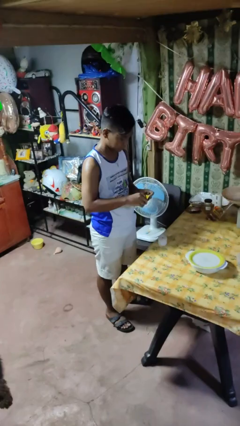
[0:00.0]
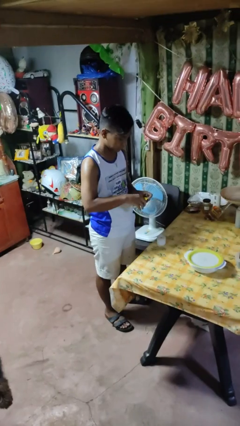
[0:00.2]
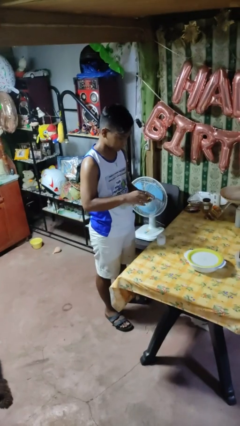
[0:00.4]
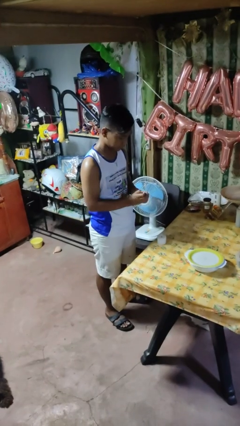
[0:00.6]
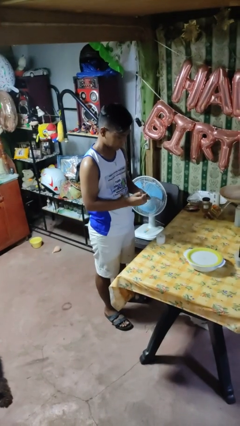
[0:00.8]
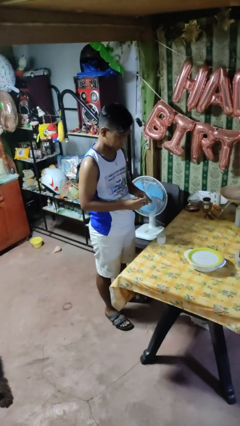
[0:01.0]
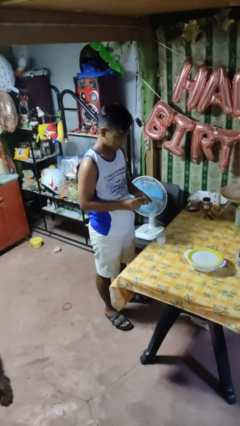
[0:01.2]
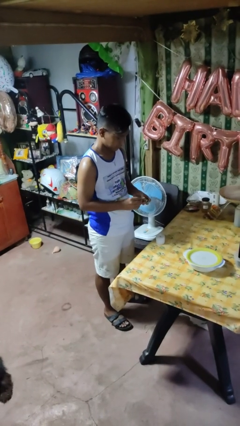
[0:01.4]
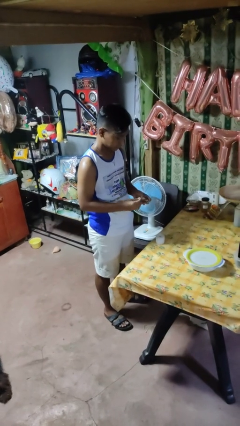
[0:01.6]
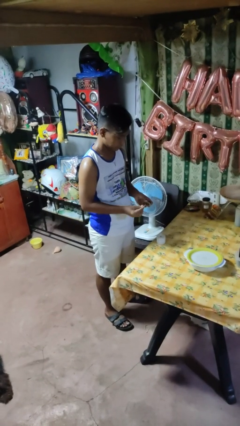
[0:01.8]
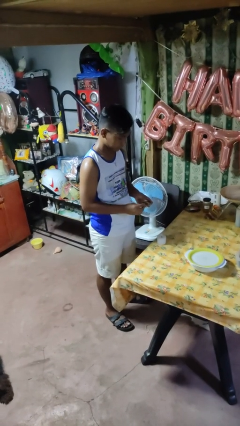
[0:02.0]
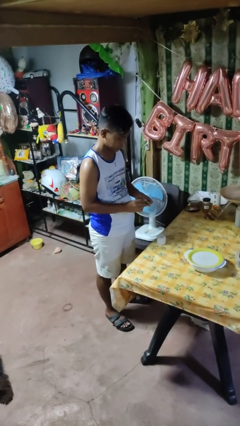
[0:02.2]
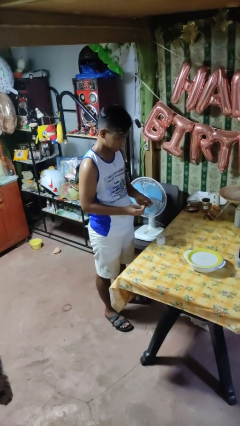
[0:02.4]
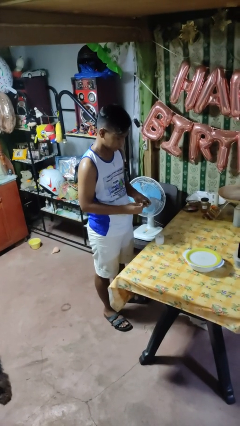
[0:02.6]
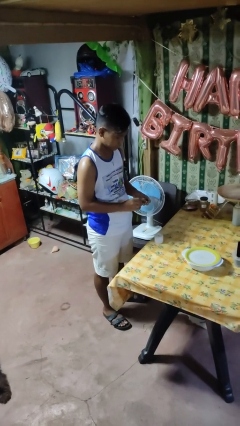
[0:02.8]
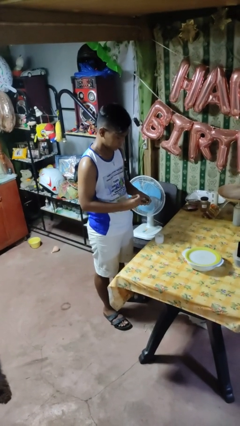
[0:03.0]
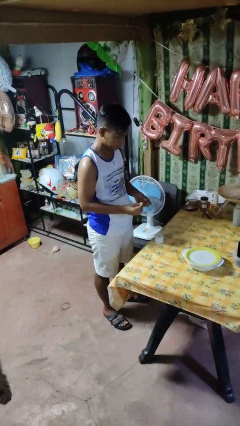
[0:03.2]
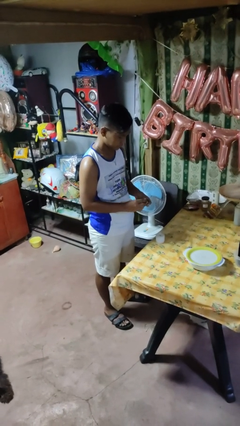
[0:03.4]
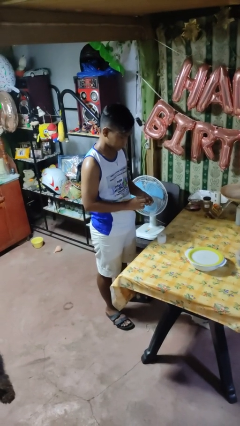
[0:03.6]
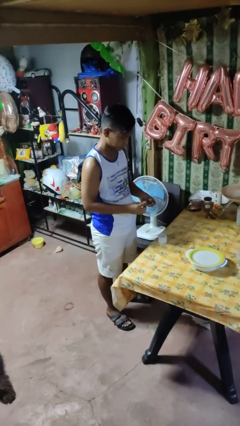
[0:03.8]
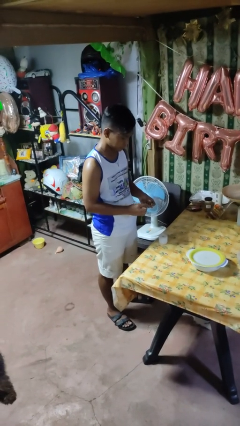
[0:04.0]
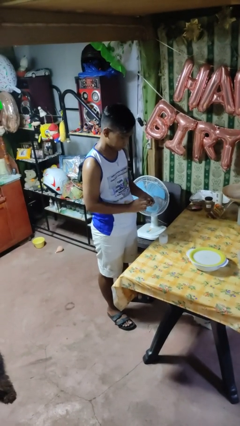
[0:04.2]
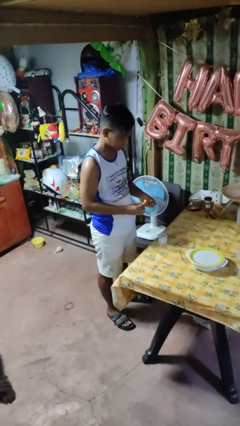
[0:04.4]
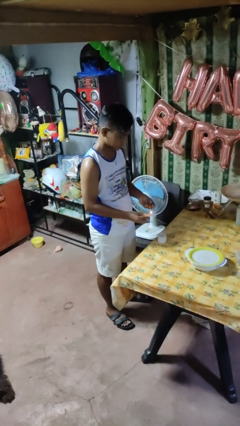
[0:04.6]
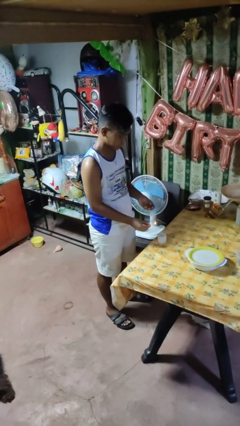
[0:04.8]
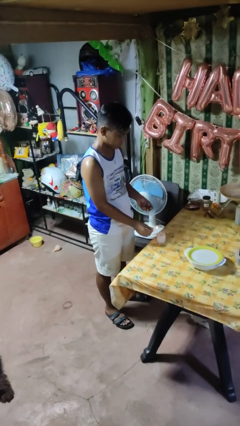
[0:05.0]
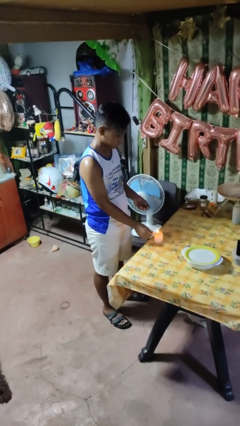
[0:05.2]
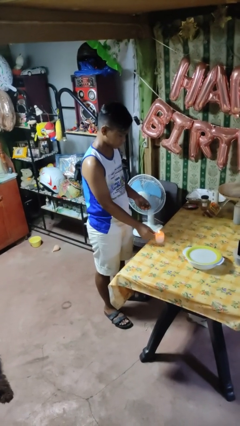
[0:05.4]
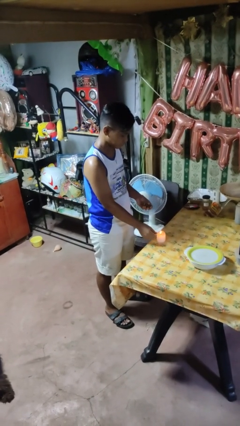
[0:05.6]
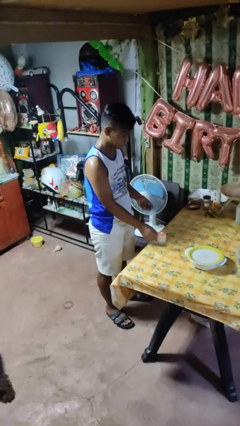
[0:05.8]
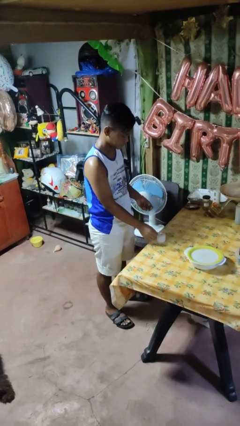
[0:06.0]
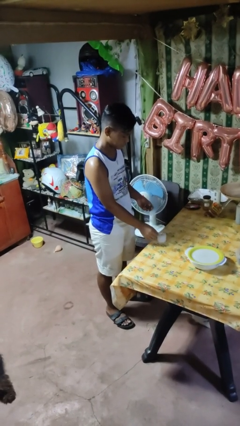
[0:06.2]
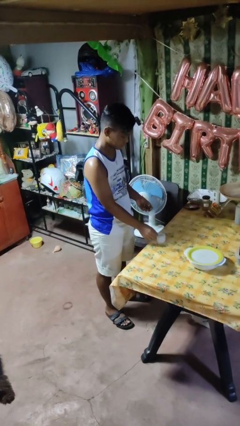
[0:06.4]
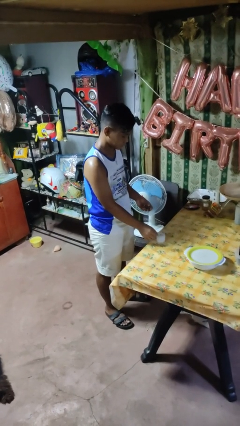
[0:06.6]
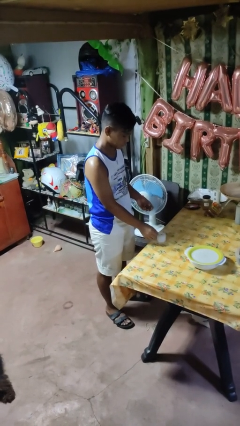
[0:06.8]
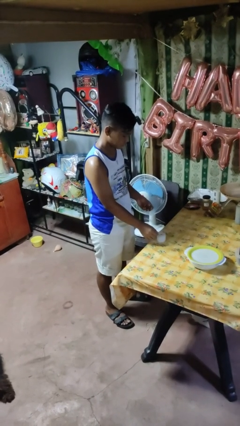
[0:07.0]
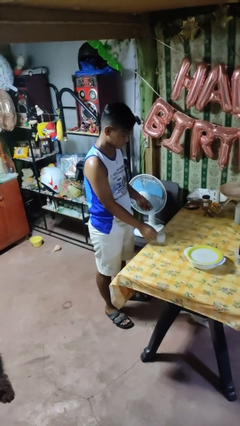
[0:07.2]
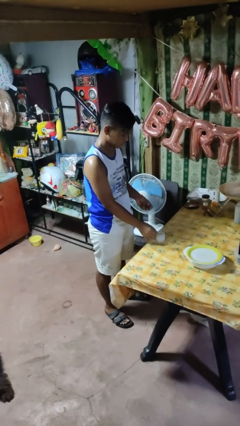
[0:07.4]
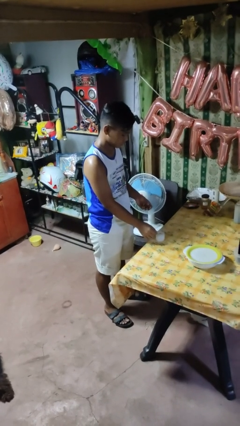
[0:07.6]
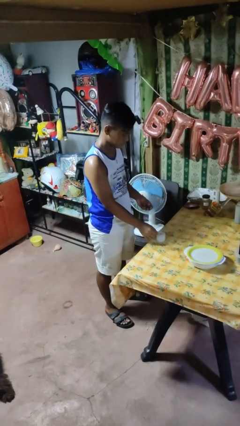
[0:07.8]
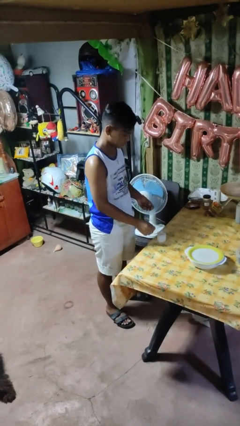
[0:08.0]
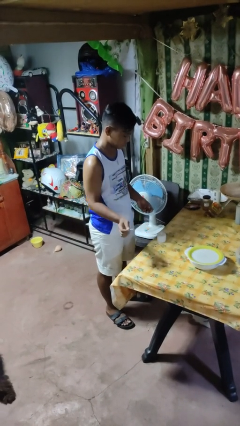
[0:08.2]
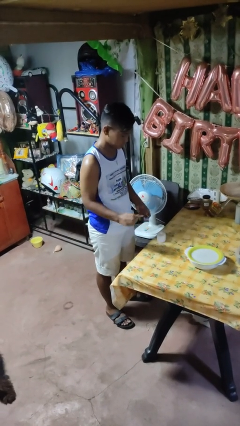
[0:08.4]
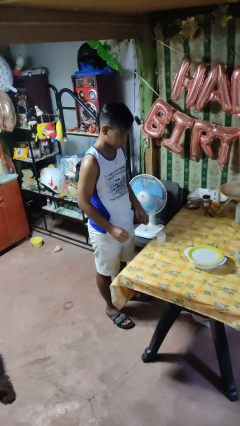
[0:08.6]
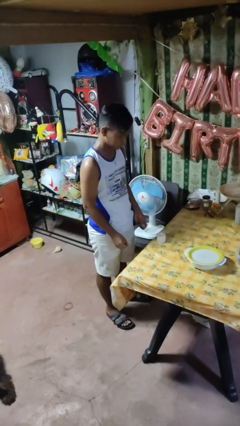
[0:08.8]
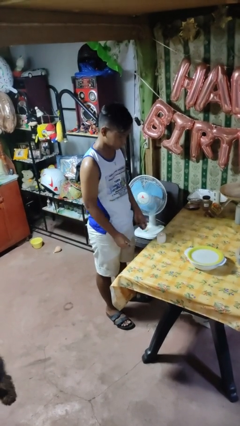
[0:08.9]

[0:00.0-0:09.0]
person lights candle

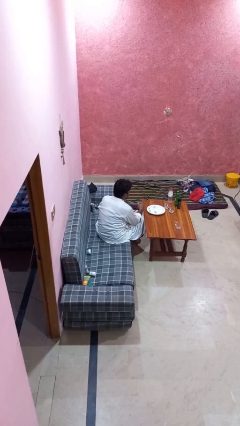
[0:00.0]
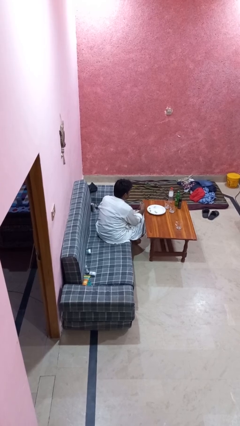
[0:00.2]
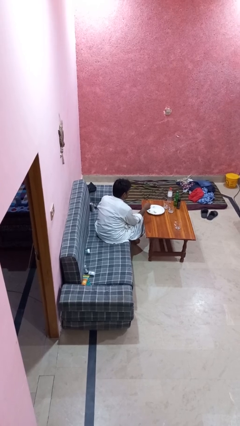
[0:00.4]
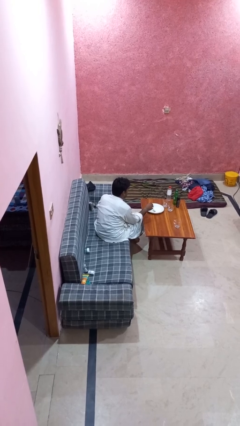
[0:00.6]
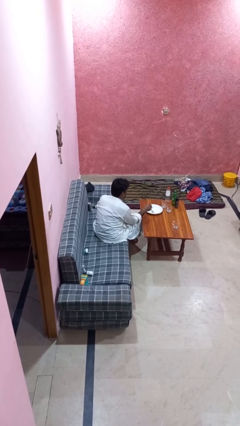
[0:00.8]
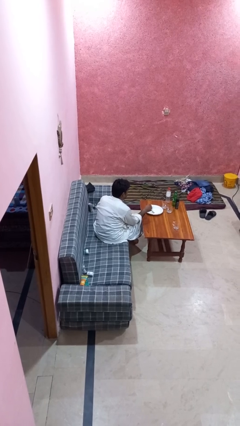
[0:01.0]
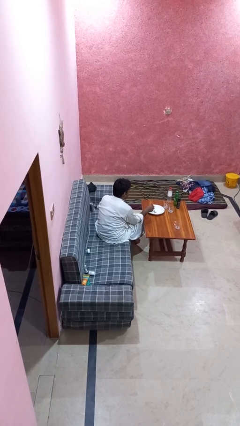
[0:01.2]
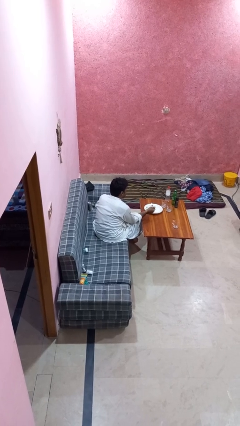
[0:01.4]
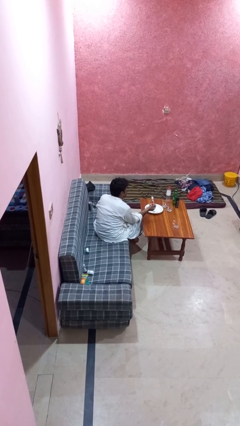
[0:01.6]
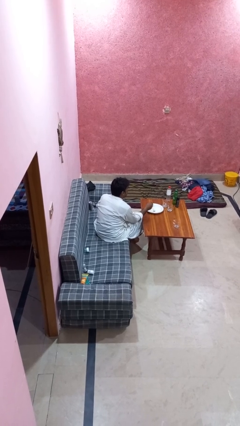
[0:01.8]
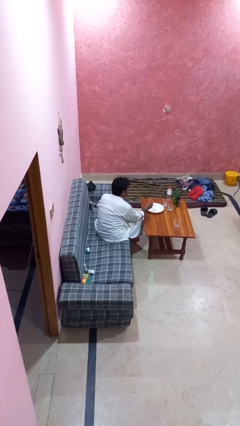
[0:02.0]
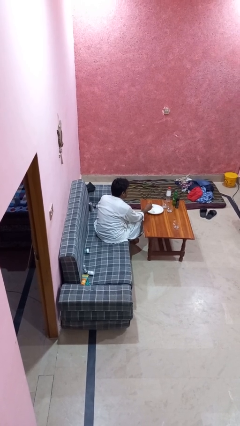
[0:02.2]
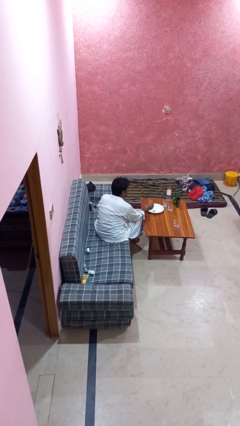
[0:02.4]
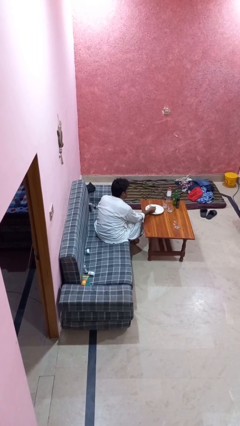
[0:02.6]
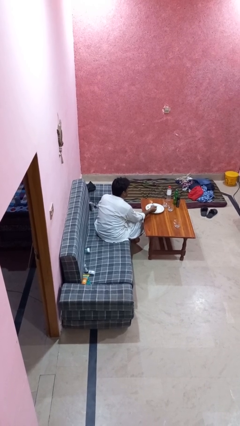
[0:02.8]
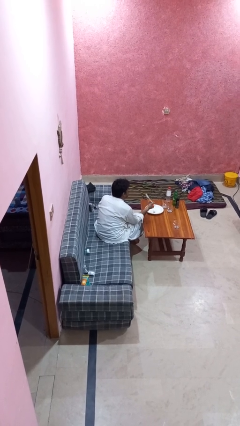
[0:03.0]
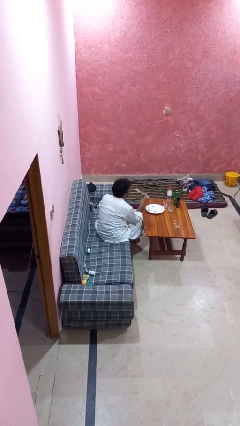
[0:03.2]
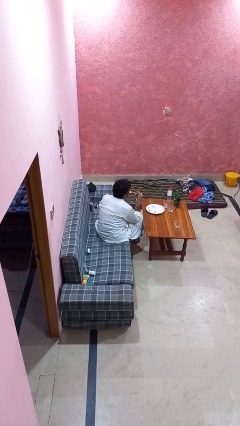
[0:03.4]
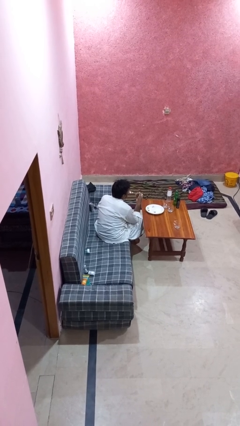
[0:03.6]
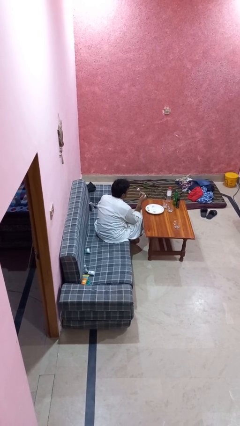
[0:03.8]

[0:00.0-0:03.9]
person eats with utensil

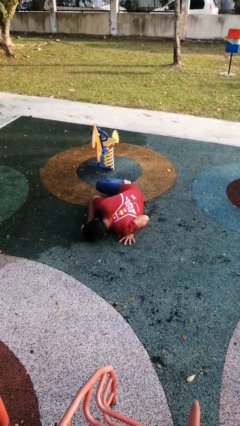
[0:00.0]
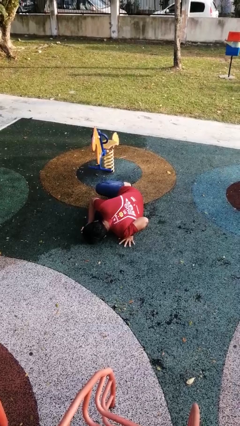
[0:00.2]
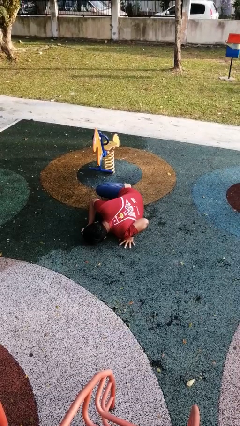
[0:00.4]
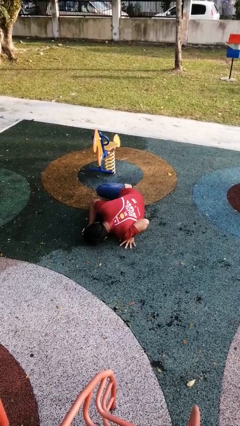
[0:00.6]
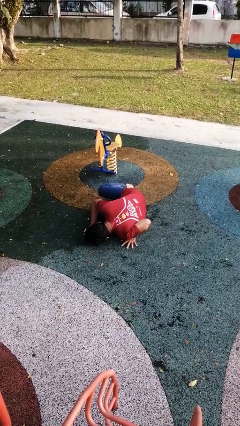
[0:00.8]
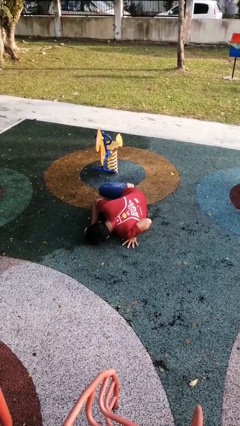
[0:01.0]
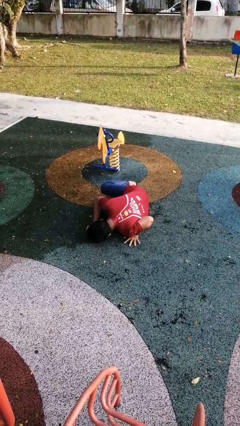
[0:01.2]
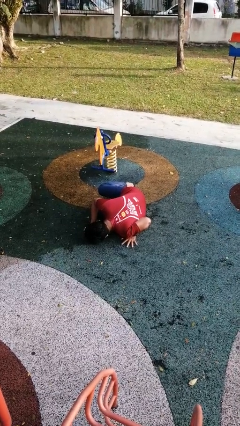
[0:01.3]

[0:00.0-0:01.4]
person lies down on floor

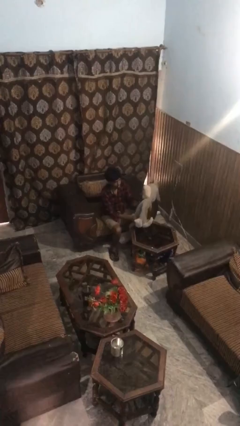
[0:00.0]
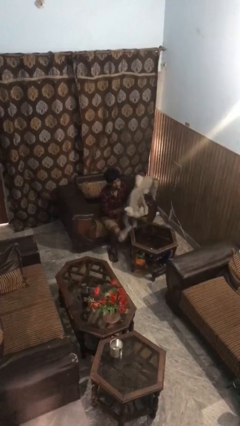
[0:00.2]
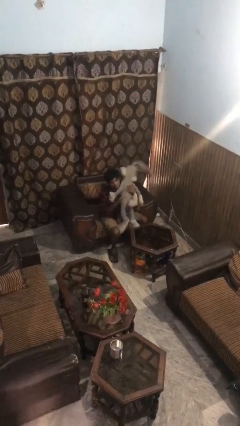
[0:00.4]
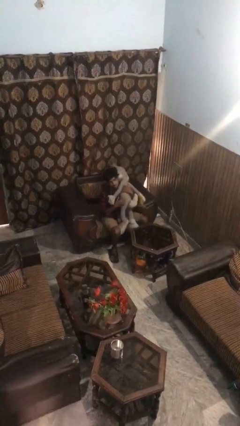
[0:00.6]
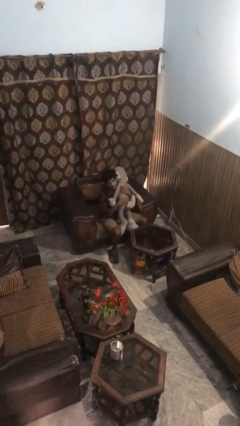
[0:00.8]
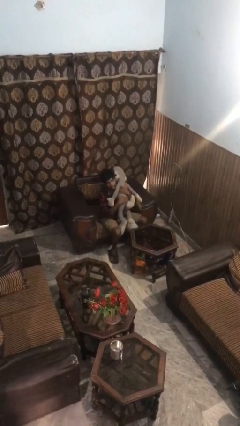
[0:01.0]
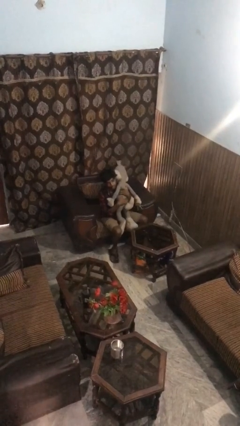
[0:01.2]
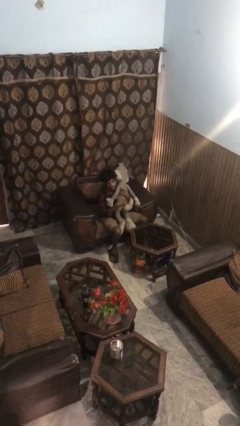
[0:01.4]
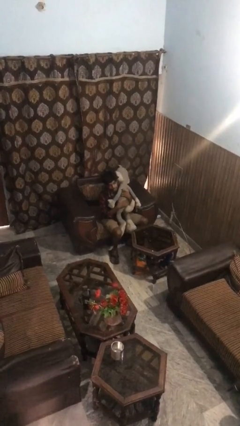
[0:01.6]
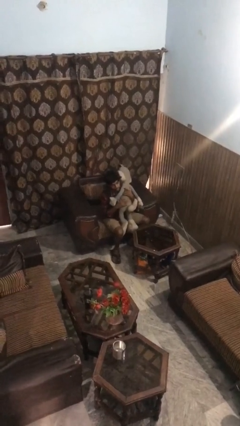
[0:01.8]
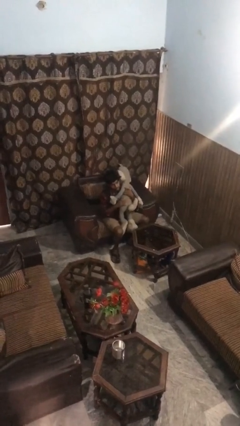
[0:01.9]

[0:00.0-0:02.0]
person hugs stuffed animal

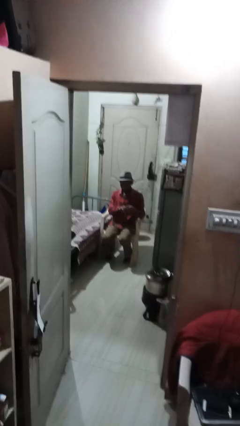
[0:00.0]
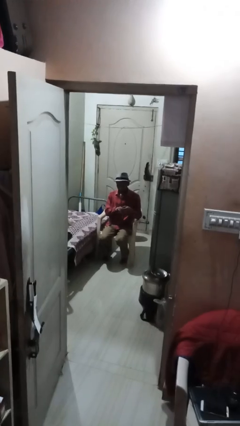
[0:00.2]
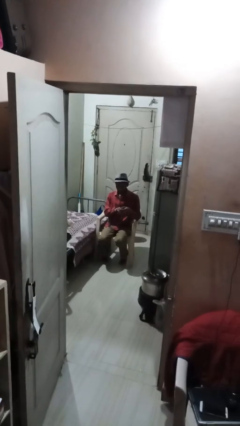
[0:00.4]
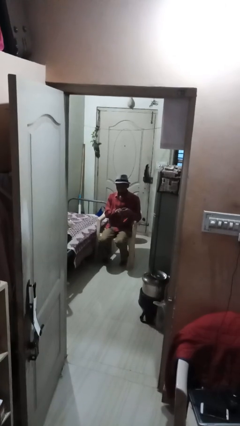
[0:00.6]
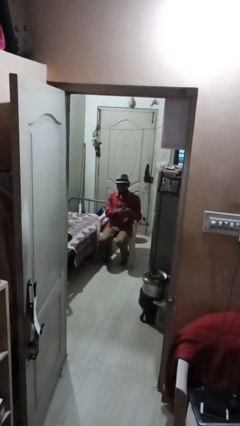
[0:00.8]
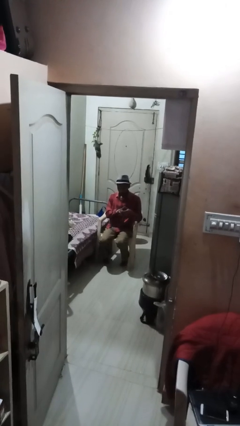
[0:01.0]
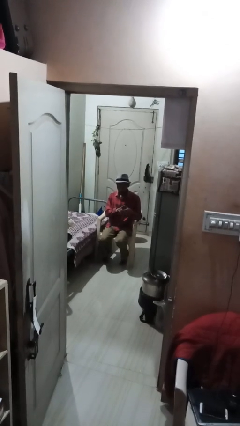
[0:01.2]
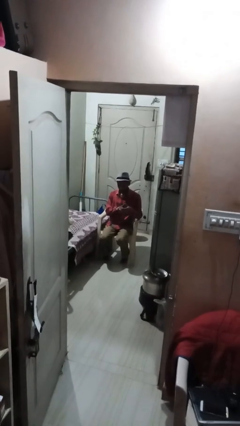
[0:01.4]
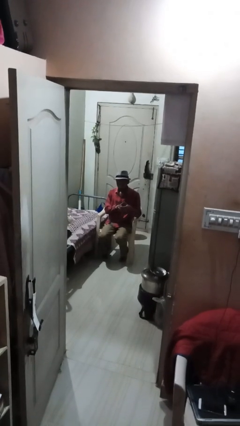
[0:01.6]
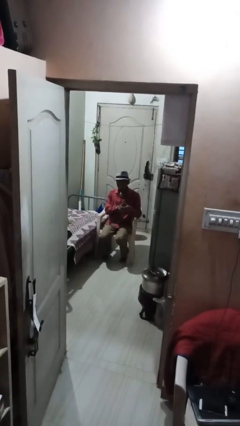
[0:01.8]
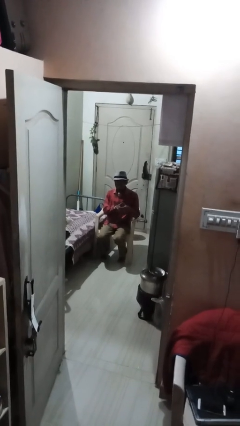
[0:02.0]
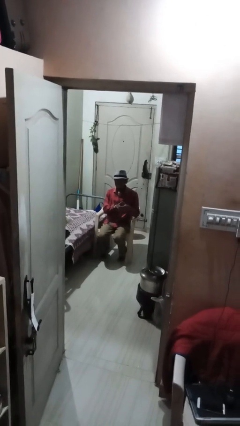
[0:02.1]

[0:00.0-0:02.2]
person clips fingernails
